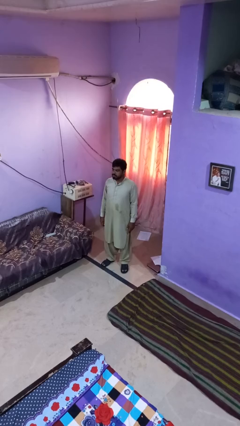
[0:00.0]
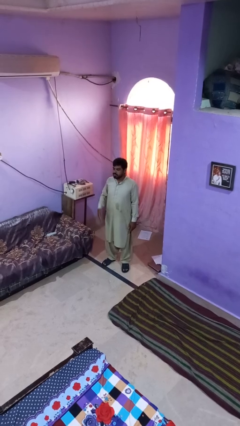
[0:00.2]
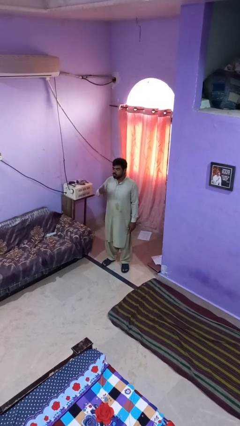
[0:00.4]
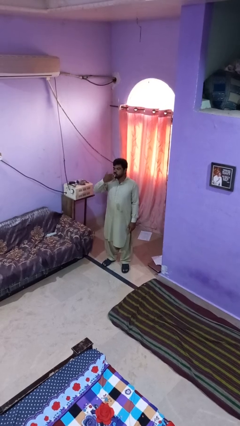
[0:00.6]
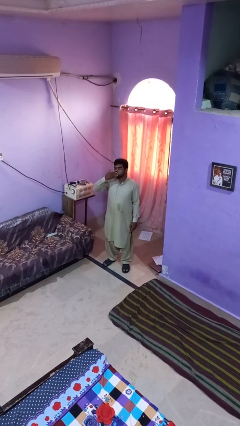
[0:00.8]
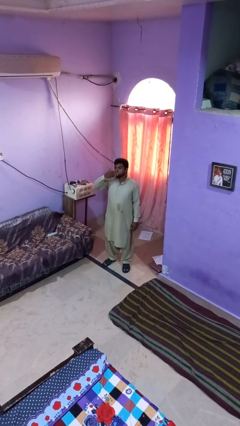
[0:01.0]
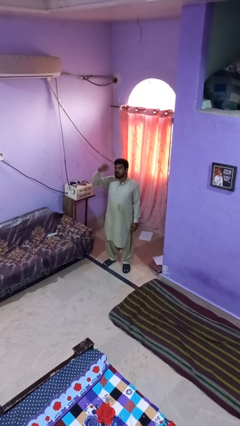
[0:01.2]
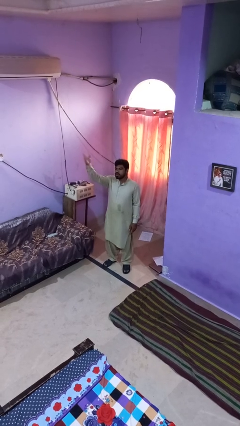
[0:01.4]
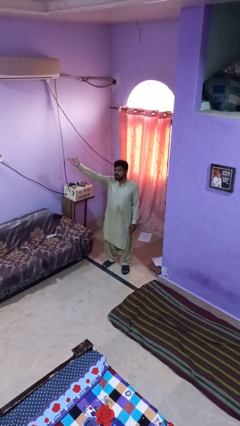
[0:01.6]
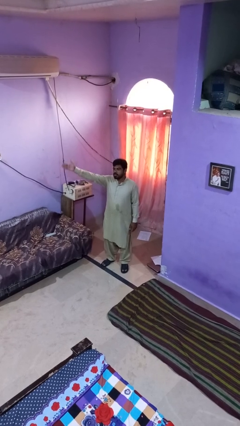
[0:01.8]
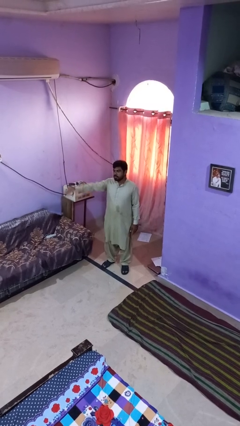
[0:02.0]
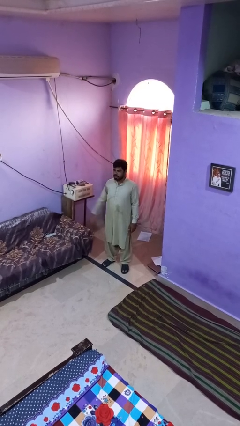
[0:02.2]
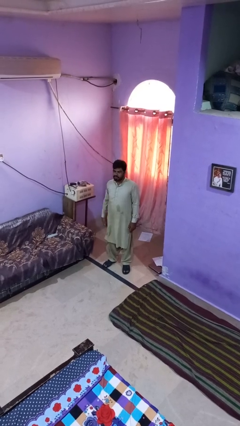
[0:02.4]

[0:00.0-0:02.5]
person gestures blow kiss

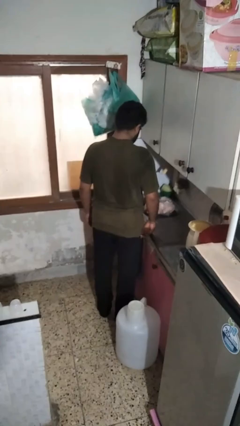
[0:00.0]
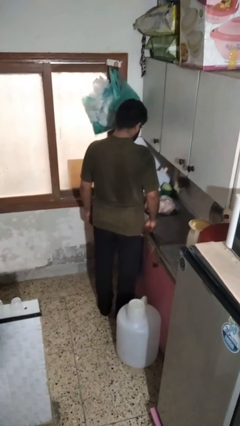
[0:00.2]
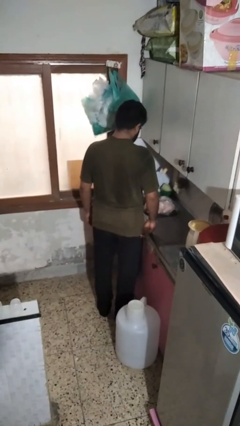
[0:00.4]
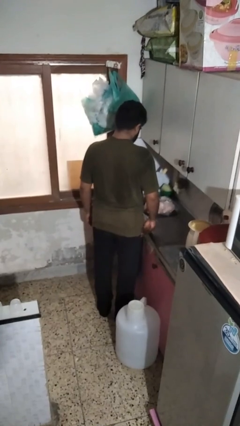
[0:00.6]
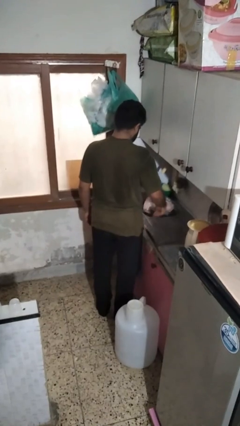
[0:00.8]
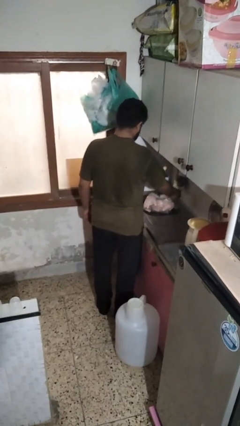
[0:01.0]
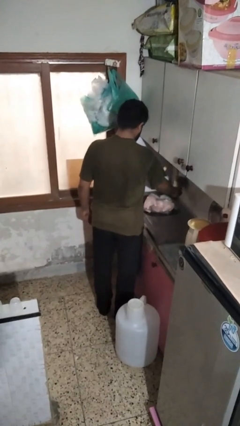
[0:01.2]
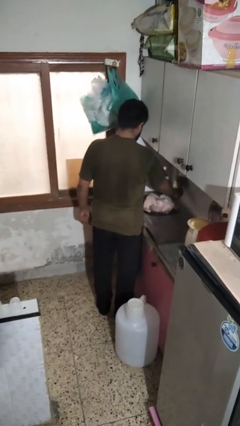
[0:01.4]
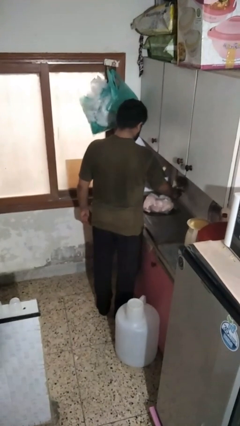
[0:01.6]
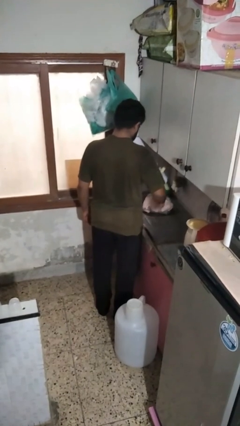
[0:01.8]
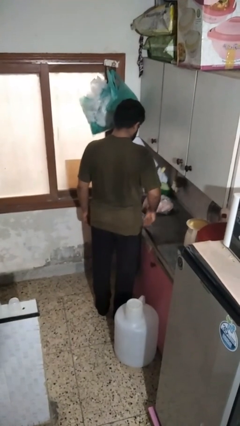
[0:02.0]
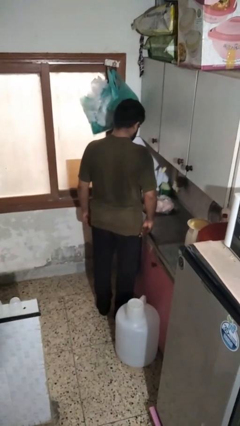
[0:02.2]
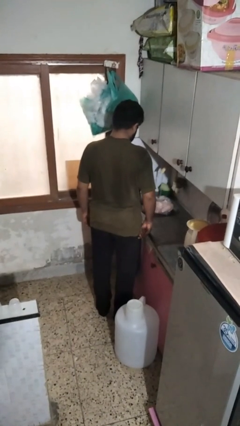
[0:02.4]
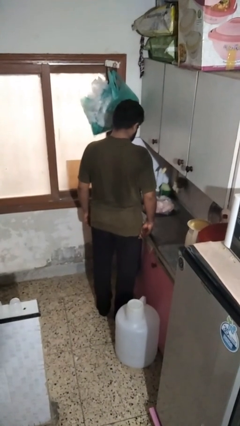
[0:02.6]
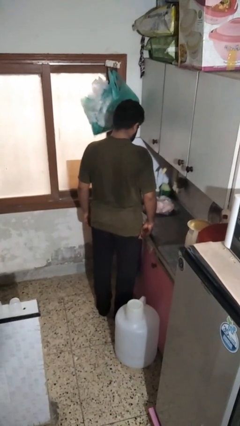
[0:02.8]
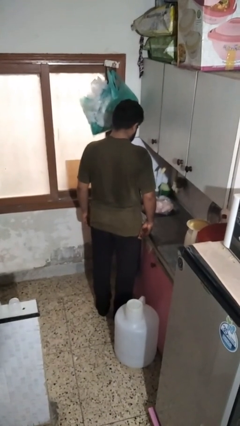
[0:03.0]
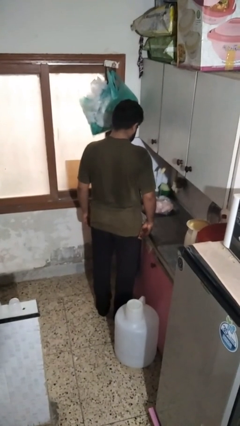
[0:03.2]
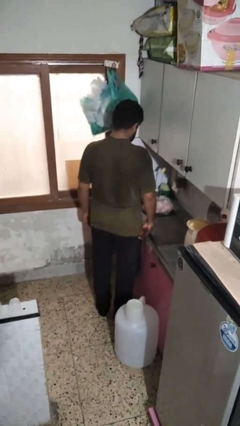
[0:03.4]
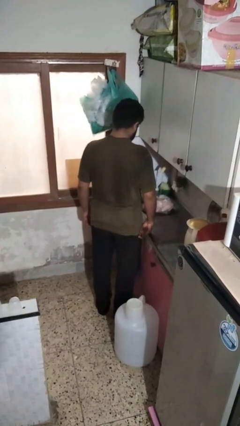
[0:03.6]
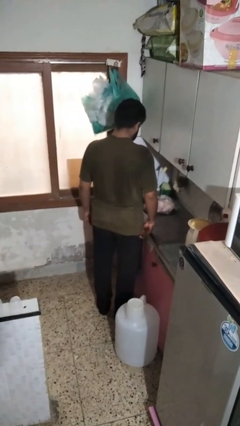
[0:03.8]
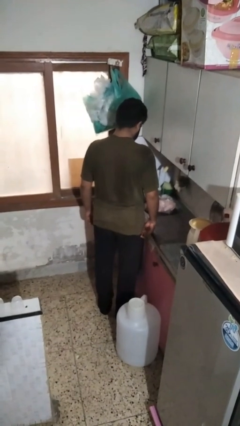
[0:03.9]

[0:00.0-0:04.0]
person turns on faucet

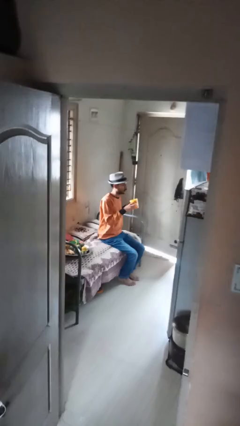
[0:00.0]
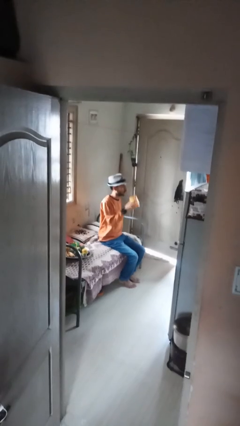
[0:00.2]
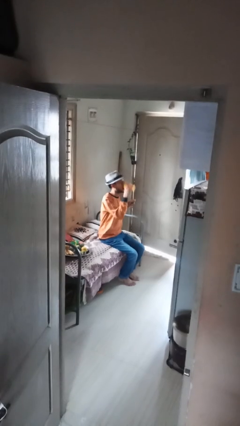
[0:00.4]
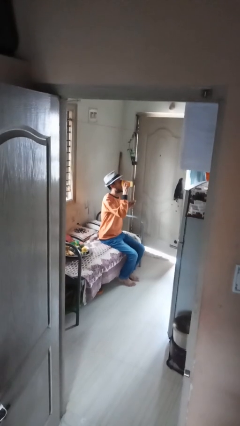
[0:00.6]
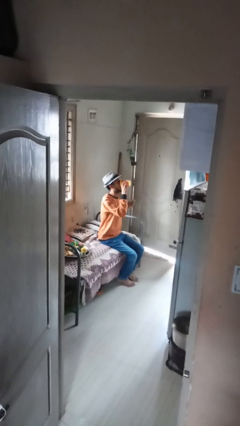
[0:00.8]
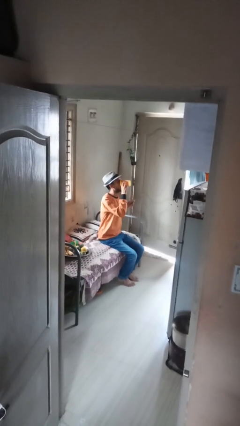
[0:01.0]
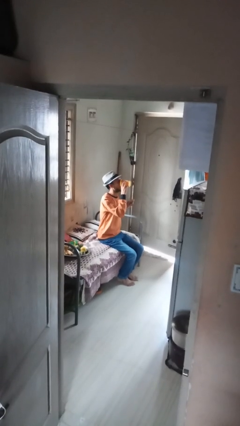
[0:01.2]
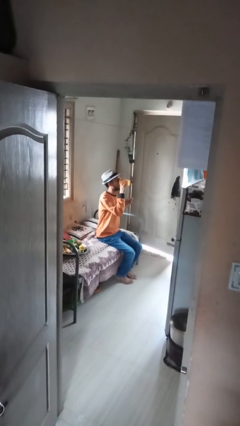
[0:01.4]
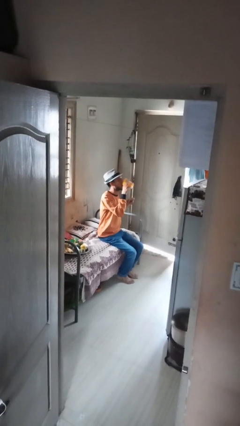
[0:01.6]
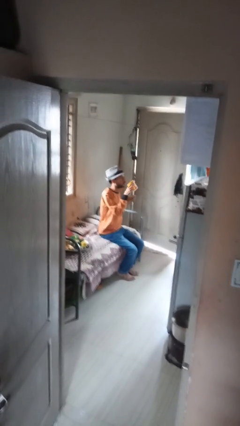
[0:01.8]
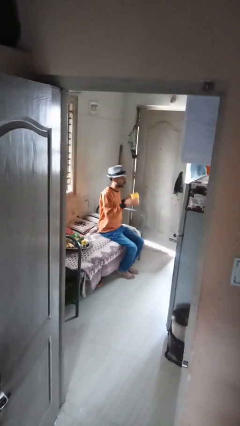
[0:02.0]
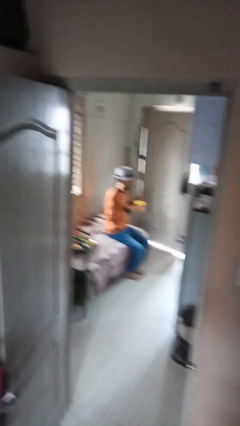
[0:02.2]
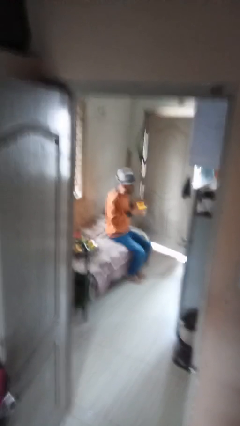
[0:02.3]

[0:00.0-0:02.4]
person drinks from mug

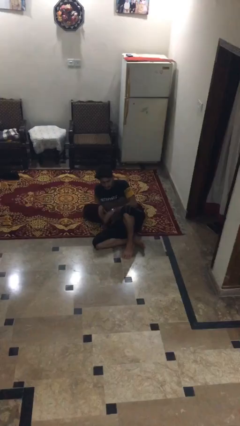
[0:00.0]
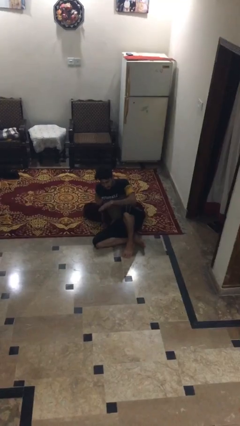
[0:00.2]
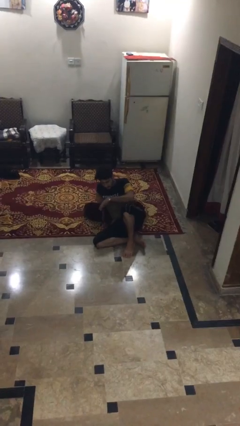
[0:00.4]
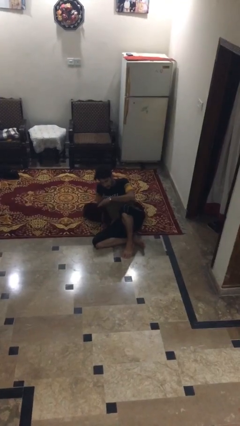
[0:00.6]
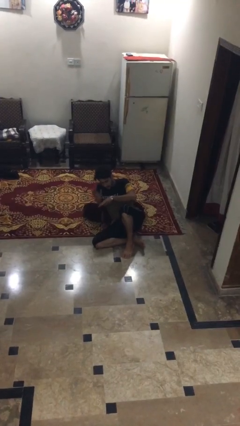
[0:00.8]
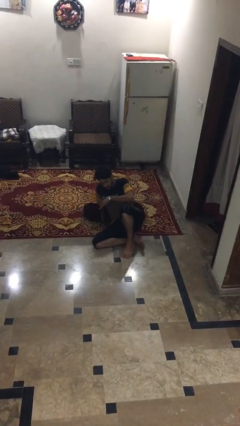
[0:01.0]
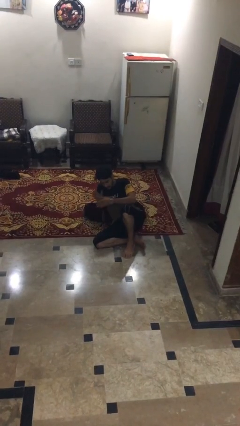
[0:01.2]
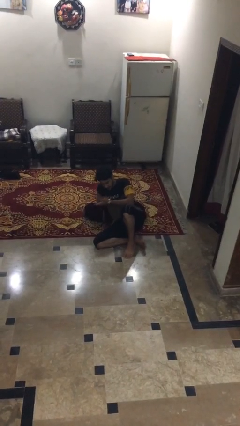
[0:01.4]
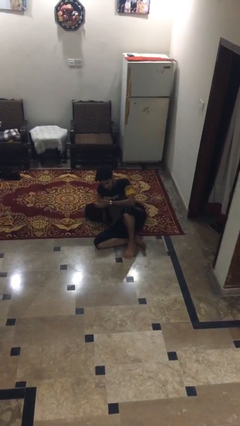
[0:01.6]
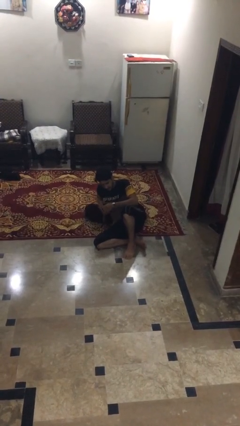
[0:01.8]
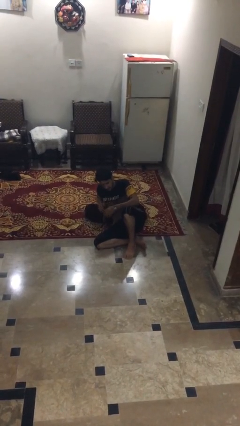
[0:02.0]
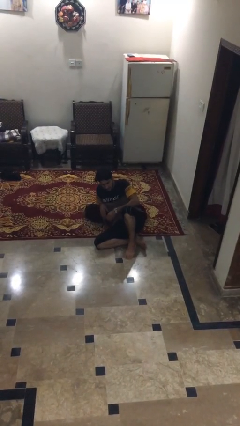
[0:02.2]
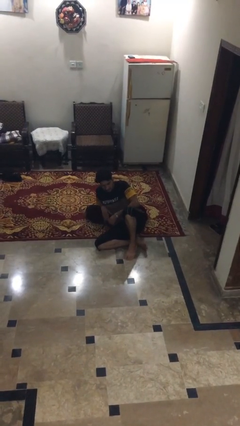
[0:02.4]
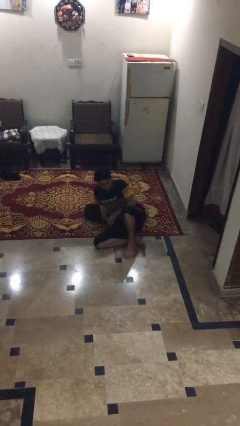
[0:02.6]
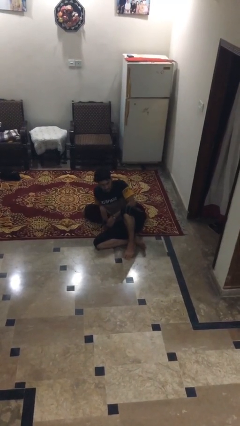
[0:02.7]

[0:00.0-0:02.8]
person swats bug

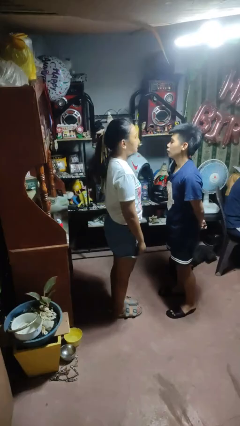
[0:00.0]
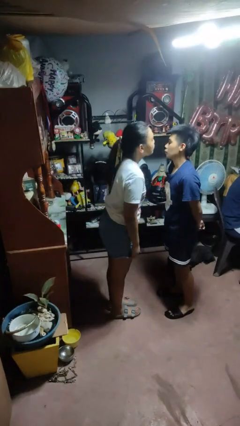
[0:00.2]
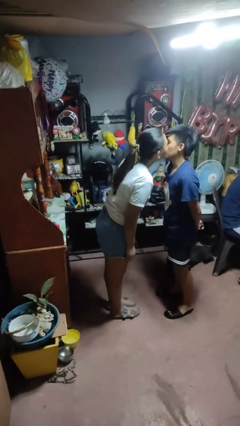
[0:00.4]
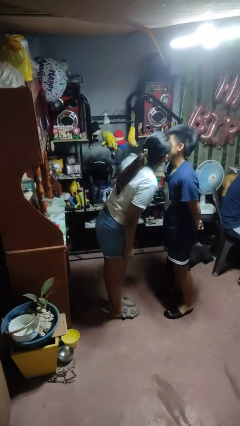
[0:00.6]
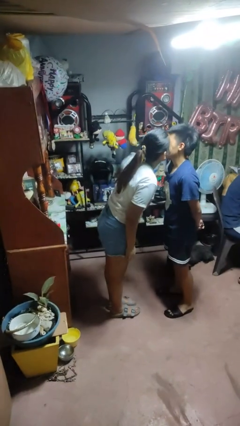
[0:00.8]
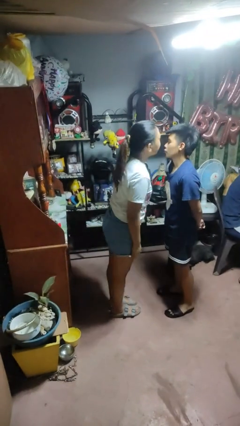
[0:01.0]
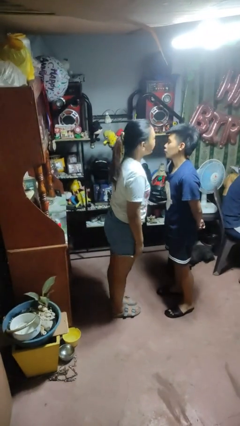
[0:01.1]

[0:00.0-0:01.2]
person kisses cheek of person

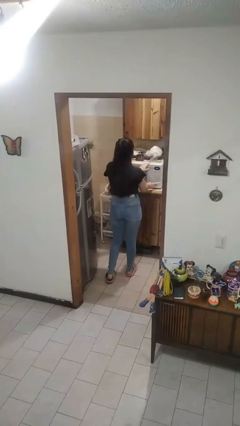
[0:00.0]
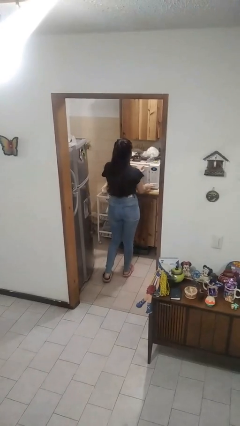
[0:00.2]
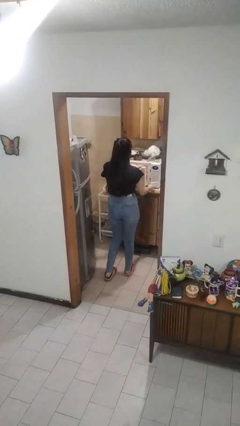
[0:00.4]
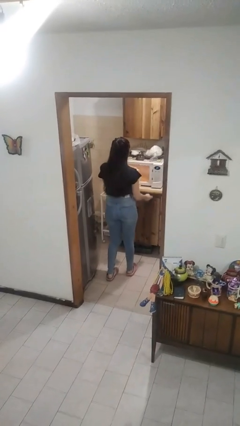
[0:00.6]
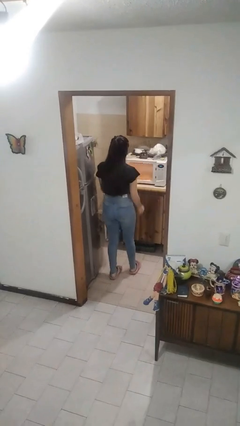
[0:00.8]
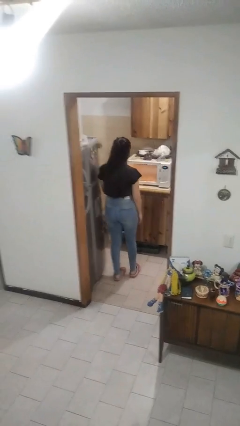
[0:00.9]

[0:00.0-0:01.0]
person opens microwave

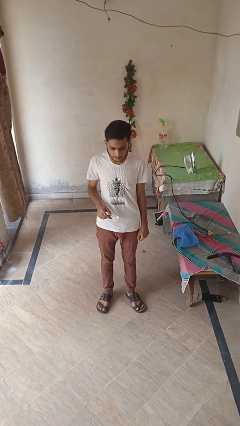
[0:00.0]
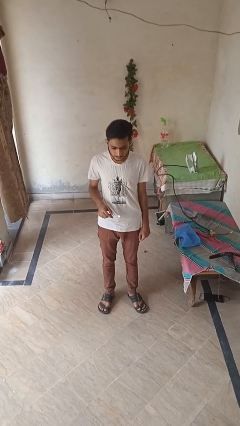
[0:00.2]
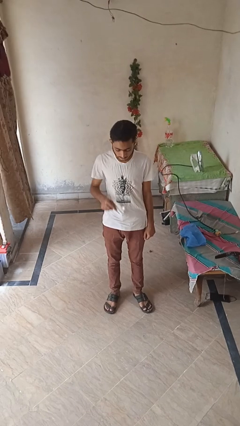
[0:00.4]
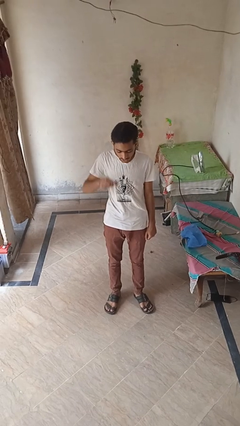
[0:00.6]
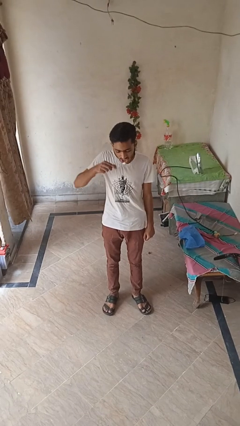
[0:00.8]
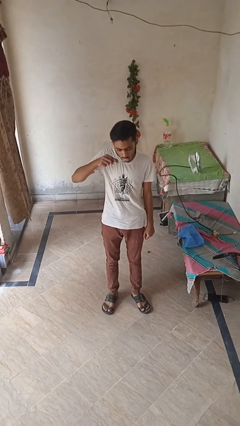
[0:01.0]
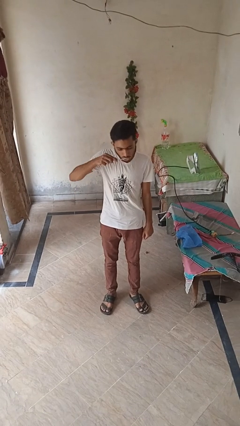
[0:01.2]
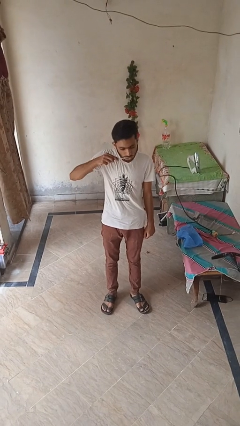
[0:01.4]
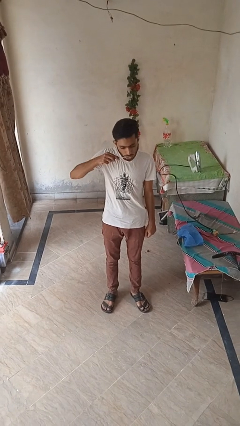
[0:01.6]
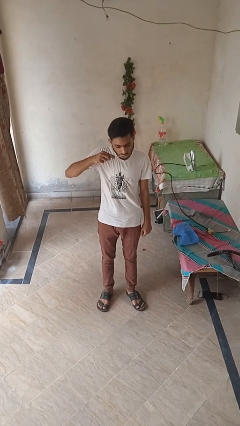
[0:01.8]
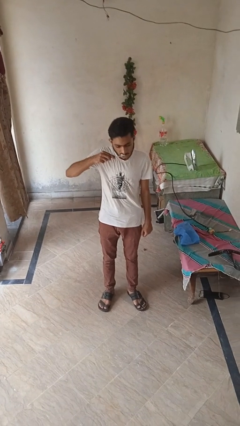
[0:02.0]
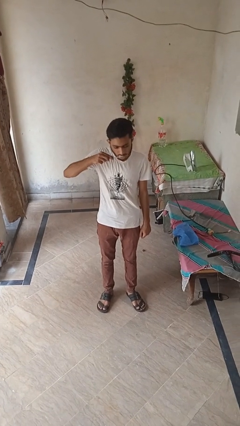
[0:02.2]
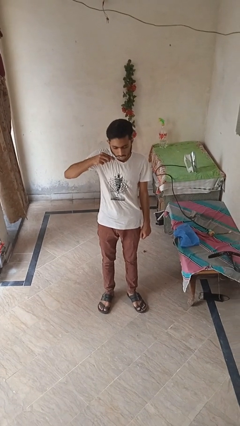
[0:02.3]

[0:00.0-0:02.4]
person brushes teeth

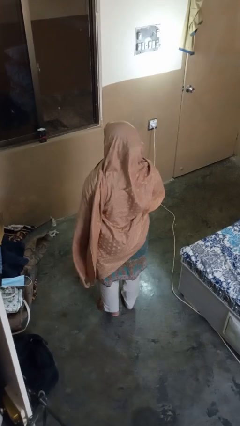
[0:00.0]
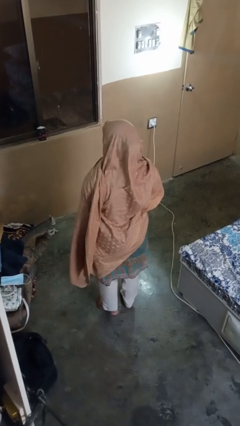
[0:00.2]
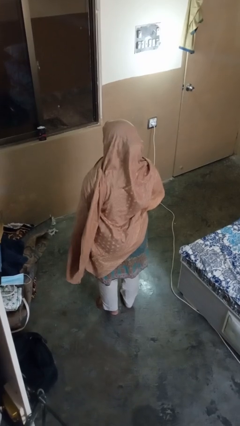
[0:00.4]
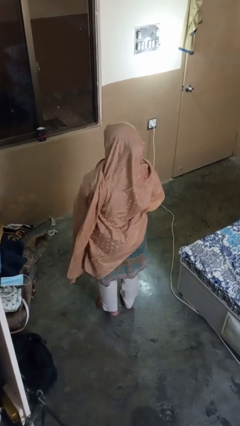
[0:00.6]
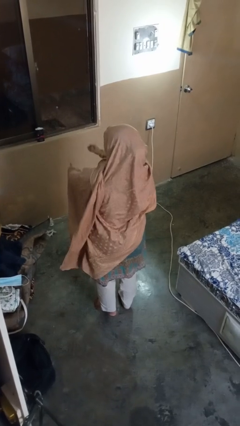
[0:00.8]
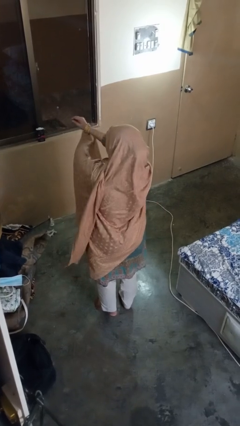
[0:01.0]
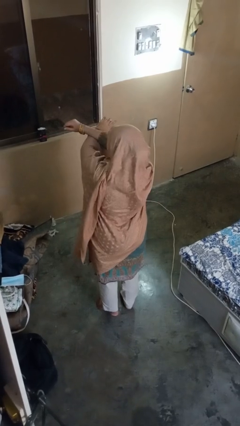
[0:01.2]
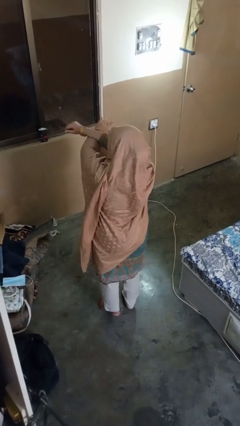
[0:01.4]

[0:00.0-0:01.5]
person crosses arms
